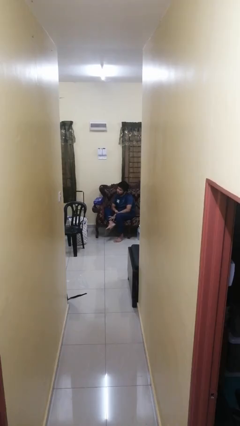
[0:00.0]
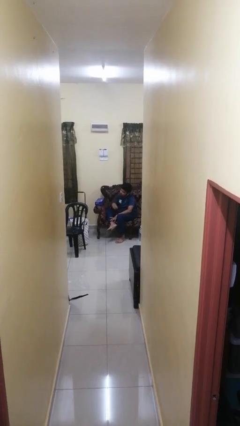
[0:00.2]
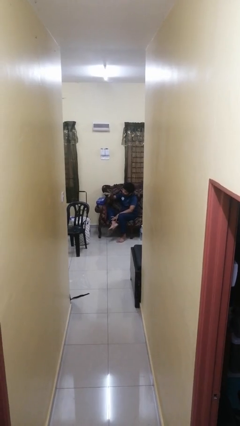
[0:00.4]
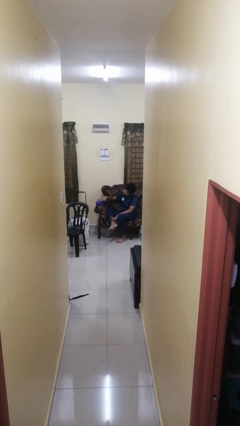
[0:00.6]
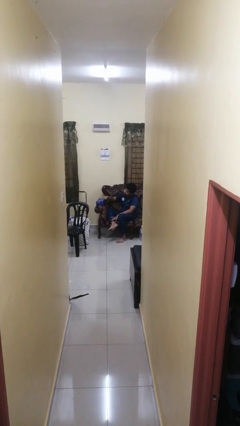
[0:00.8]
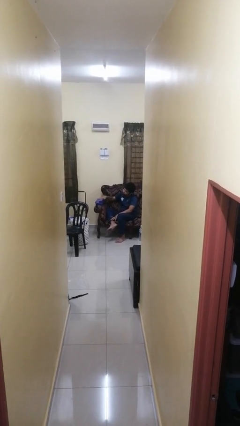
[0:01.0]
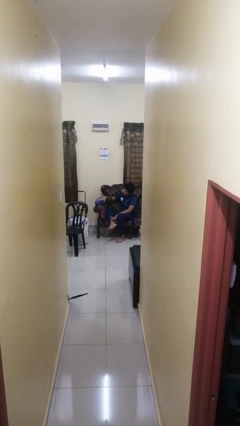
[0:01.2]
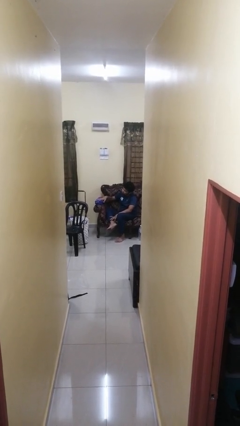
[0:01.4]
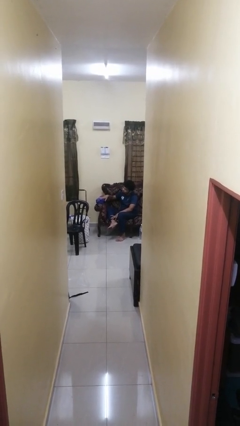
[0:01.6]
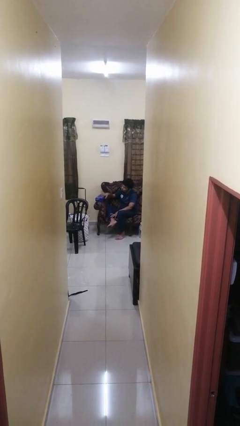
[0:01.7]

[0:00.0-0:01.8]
person taps object with finger

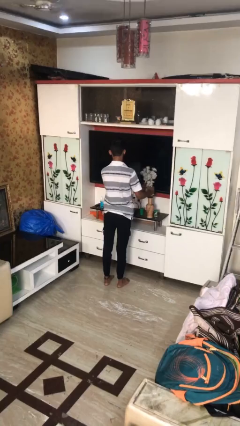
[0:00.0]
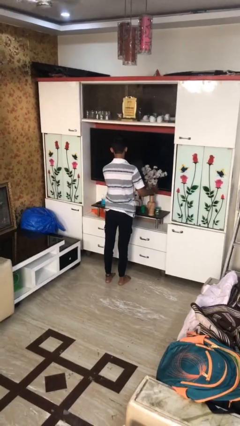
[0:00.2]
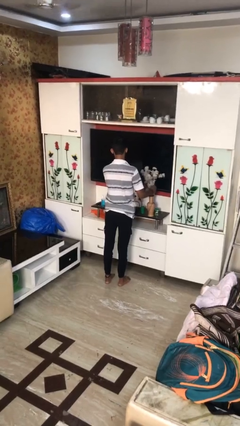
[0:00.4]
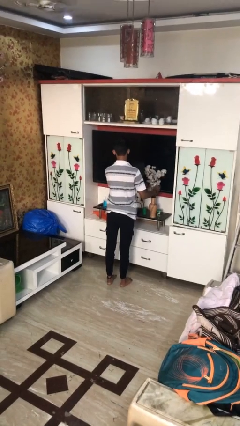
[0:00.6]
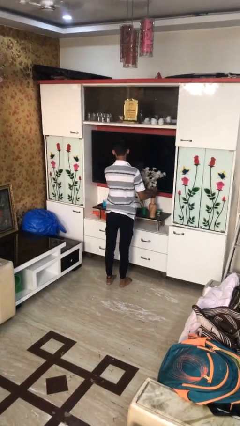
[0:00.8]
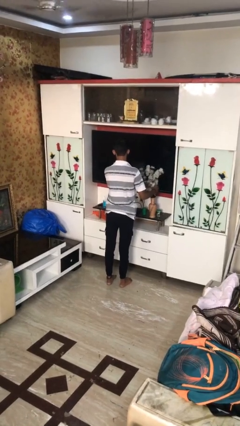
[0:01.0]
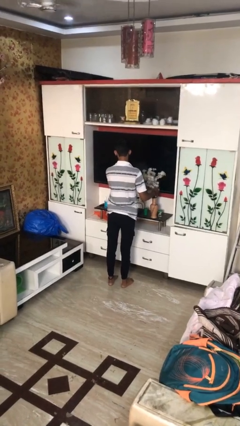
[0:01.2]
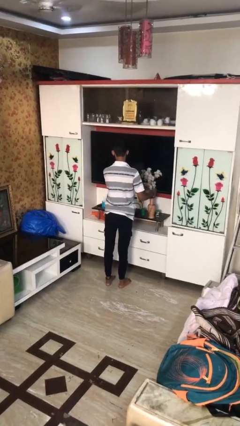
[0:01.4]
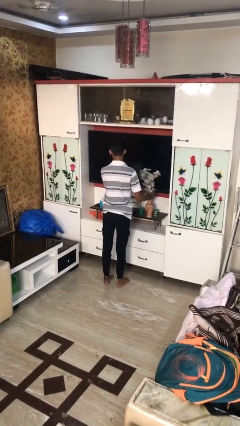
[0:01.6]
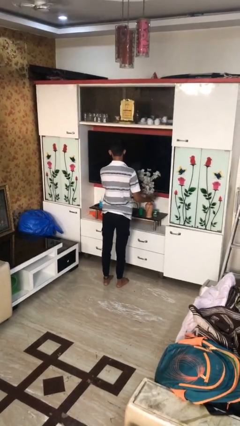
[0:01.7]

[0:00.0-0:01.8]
person arranges flowers in vase

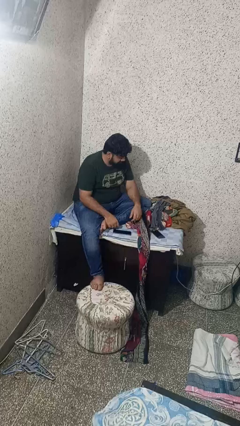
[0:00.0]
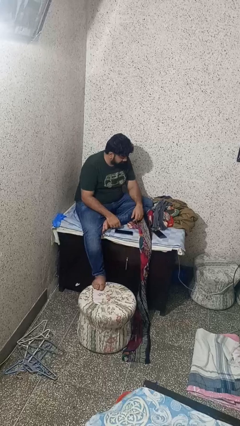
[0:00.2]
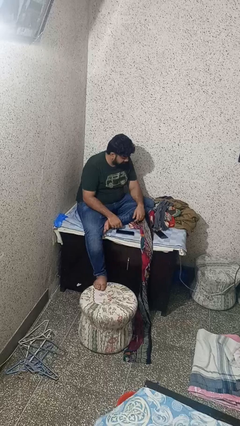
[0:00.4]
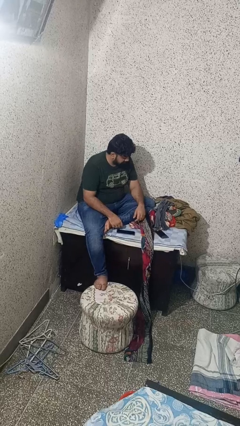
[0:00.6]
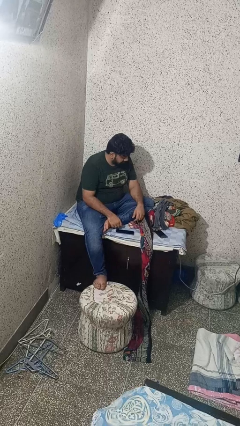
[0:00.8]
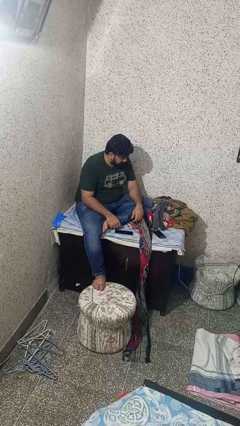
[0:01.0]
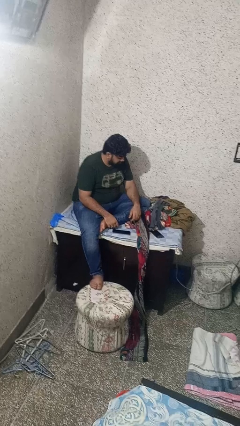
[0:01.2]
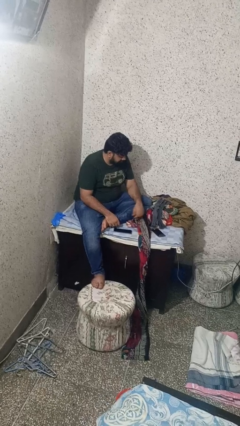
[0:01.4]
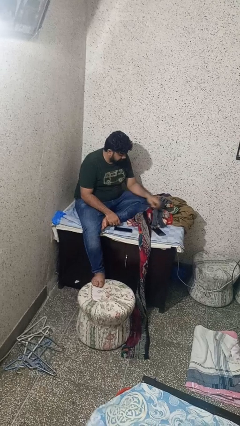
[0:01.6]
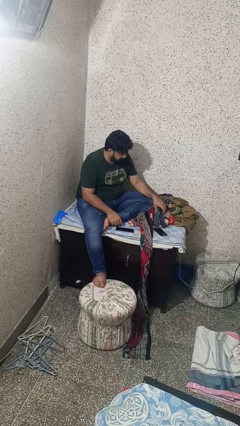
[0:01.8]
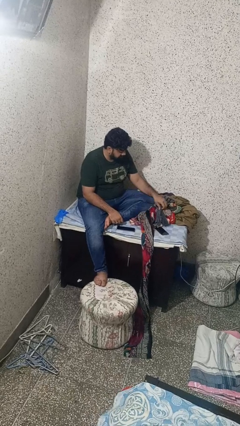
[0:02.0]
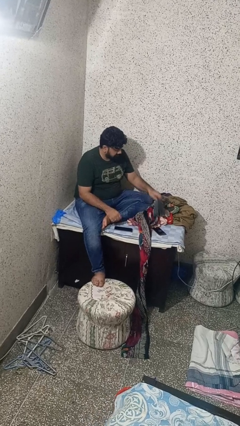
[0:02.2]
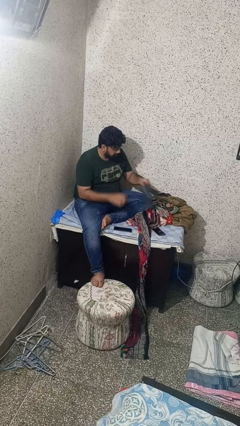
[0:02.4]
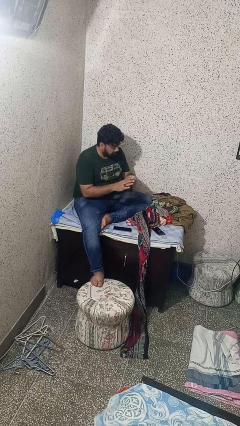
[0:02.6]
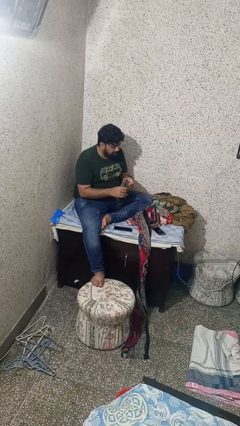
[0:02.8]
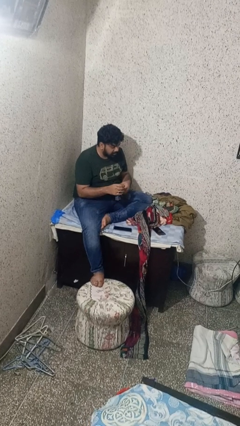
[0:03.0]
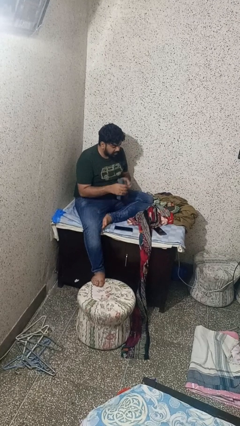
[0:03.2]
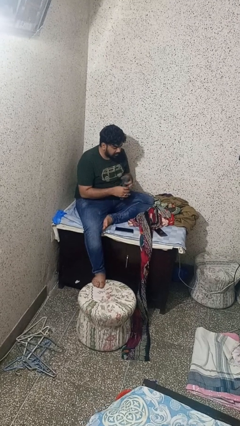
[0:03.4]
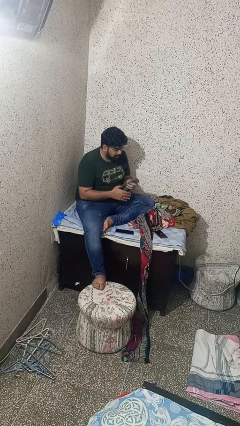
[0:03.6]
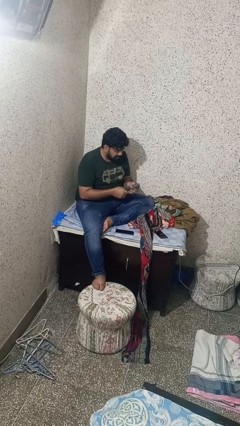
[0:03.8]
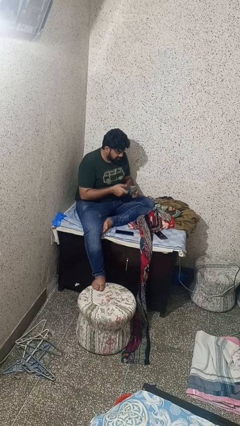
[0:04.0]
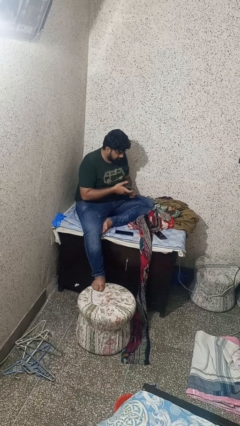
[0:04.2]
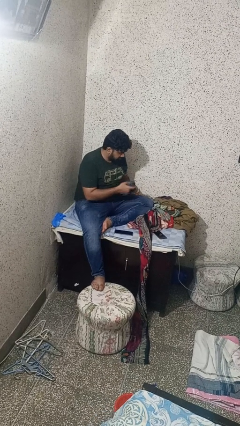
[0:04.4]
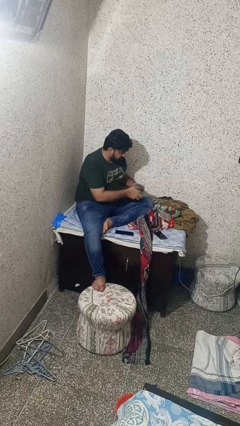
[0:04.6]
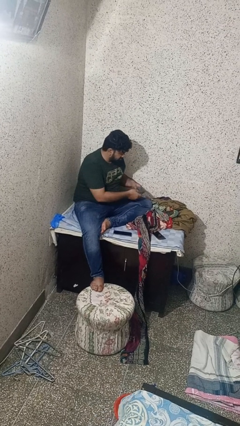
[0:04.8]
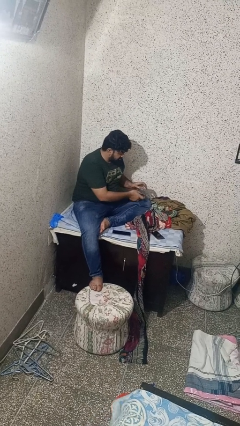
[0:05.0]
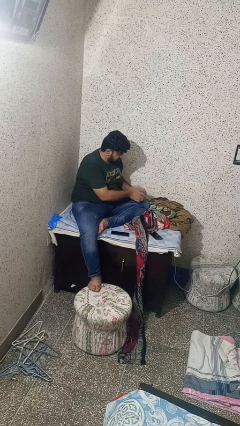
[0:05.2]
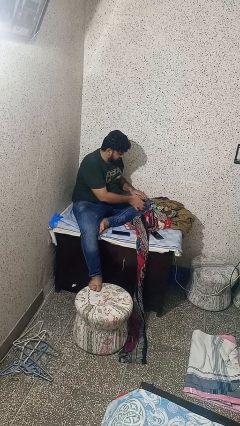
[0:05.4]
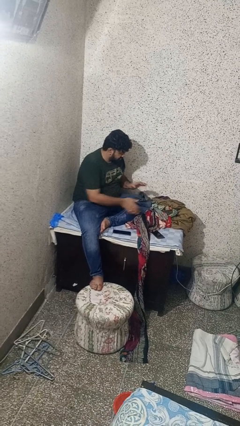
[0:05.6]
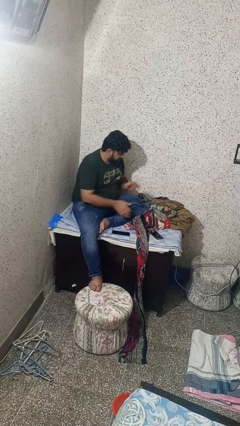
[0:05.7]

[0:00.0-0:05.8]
person folds socks

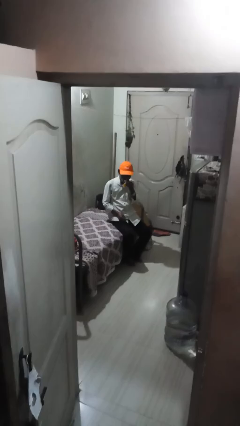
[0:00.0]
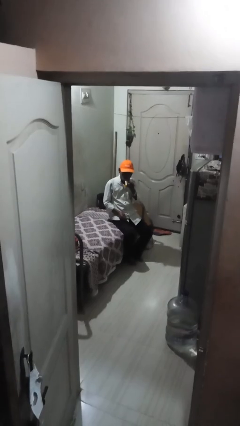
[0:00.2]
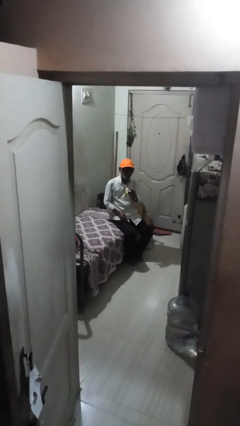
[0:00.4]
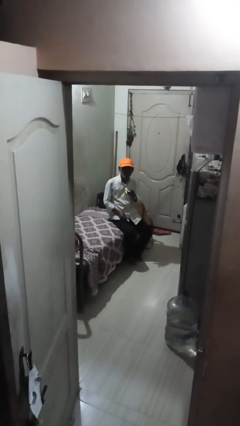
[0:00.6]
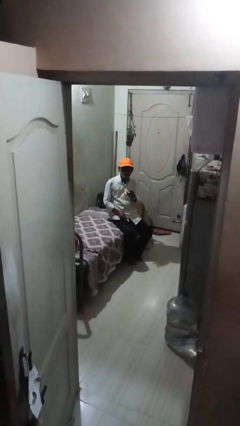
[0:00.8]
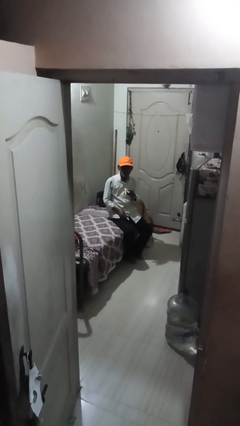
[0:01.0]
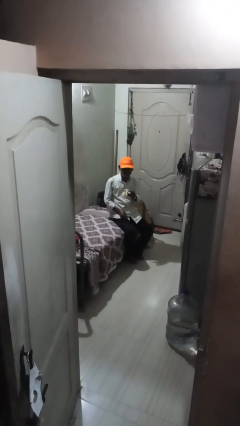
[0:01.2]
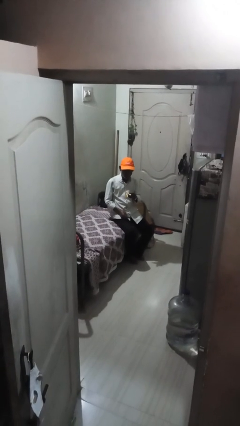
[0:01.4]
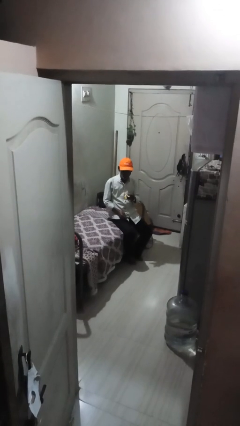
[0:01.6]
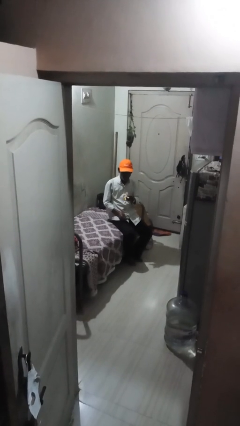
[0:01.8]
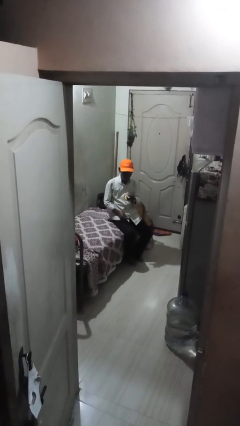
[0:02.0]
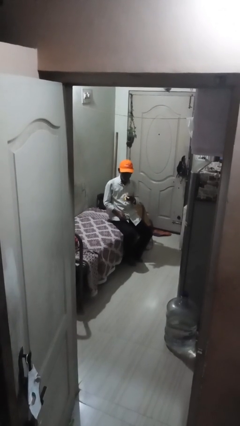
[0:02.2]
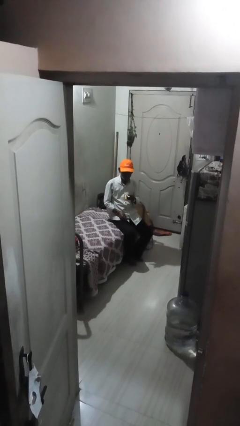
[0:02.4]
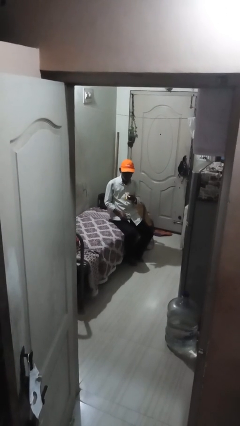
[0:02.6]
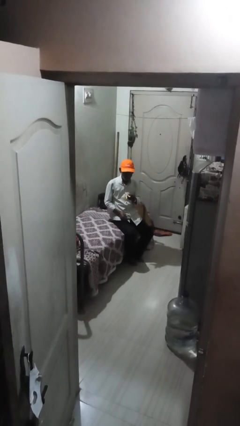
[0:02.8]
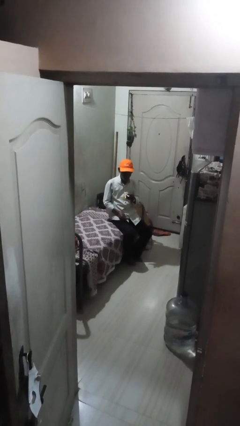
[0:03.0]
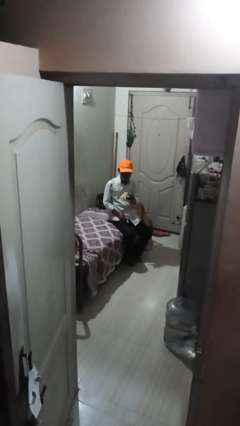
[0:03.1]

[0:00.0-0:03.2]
person eats banana

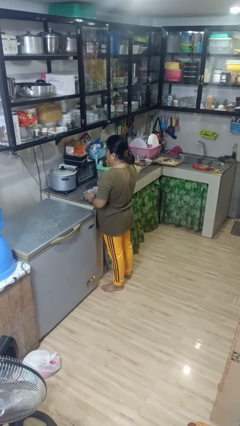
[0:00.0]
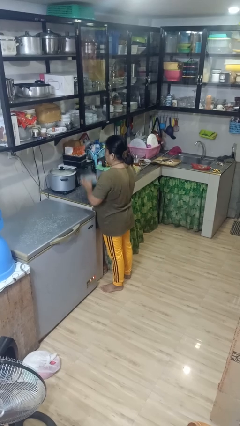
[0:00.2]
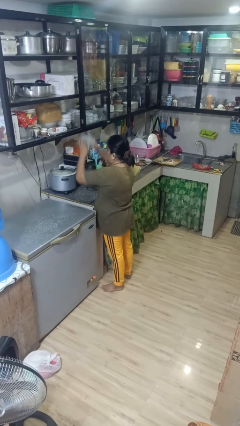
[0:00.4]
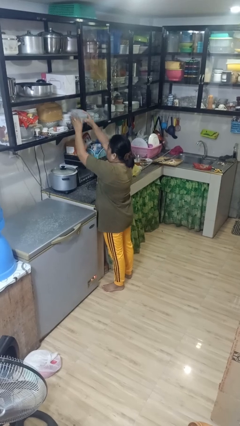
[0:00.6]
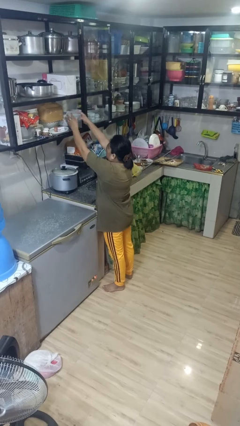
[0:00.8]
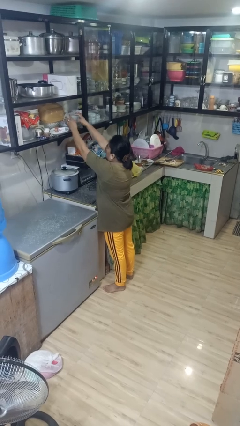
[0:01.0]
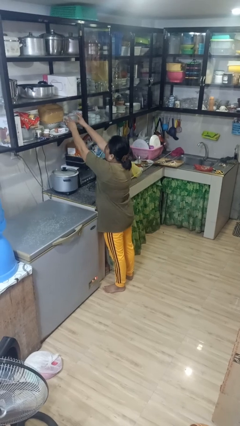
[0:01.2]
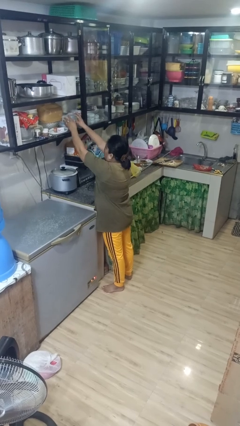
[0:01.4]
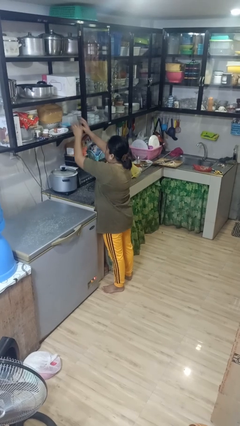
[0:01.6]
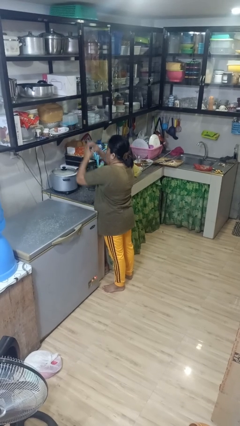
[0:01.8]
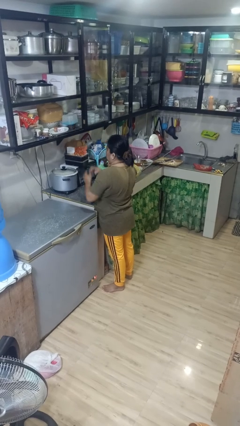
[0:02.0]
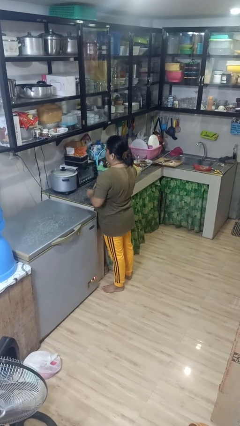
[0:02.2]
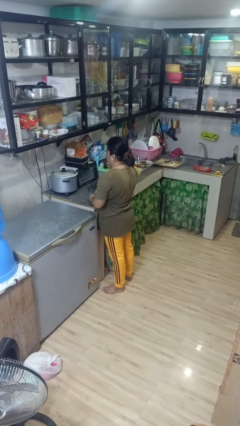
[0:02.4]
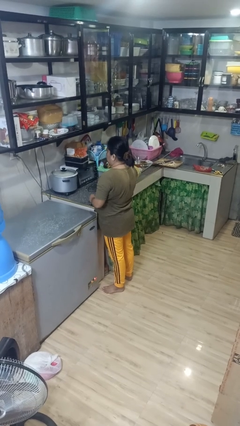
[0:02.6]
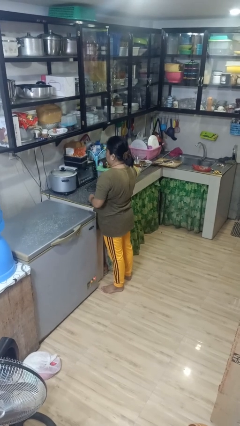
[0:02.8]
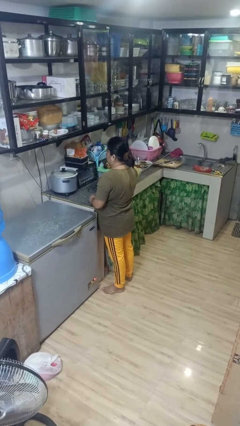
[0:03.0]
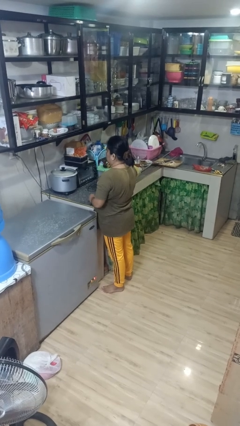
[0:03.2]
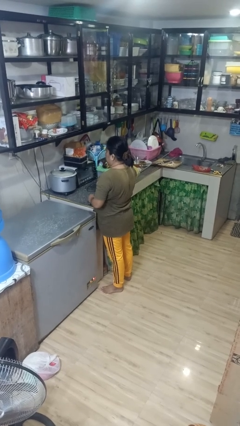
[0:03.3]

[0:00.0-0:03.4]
person puts object in cabinet

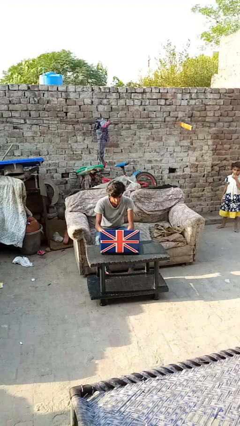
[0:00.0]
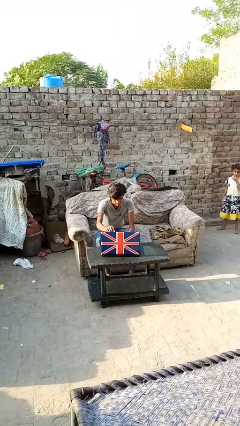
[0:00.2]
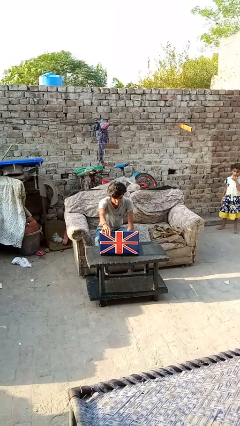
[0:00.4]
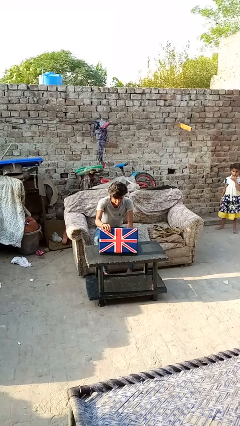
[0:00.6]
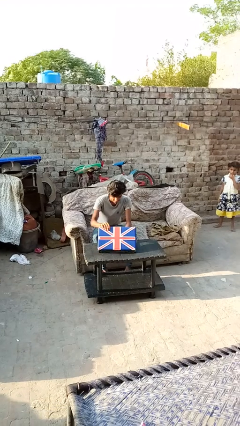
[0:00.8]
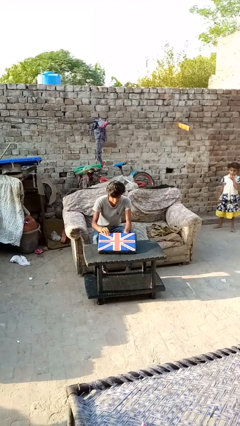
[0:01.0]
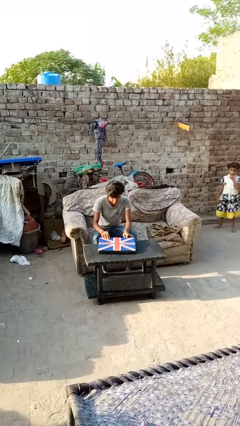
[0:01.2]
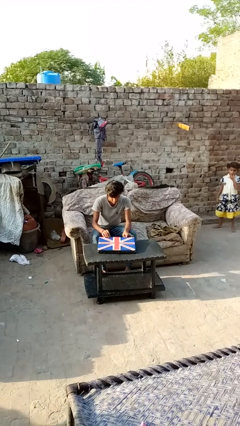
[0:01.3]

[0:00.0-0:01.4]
person closes laptop

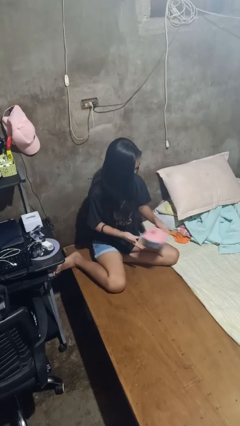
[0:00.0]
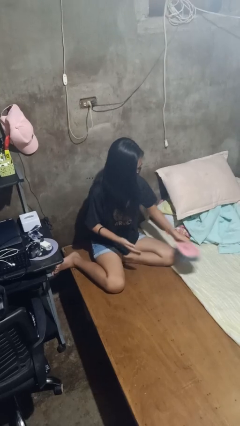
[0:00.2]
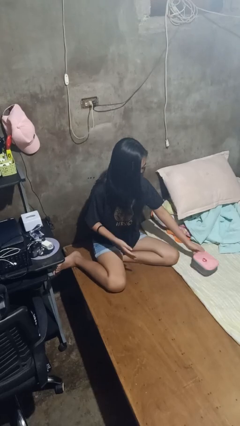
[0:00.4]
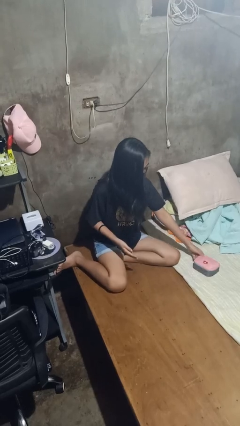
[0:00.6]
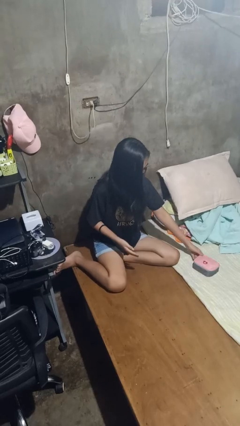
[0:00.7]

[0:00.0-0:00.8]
person puts down object on bed
